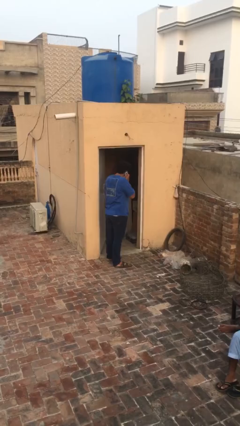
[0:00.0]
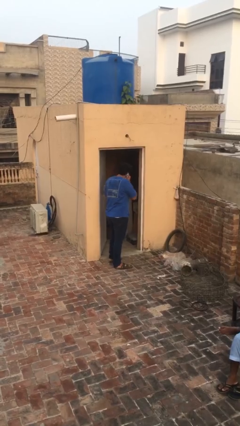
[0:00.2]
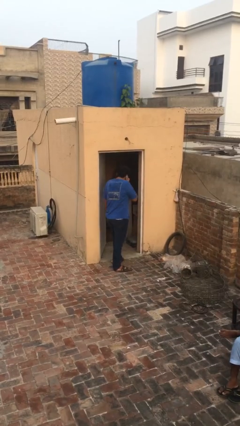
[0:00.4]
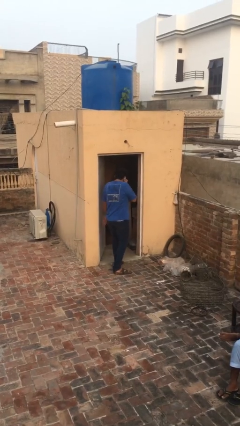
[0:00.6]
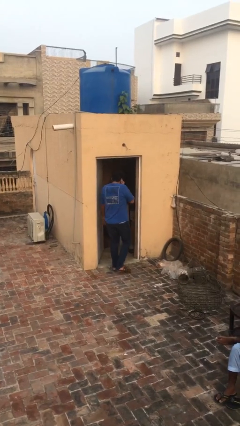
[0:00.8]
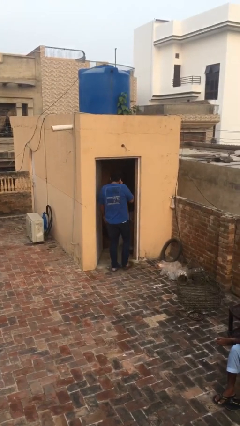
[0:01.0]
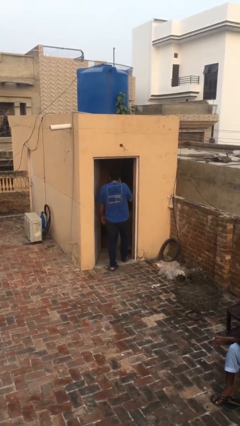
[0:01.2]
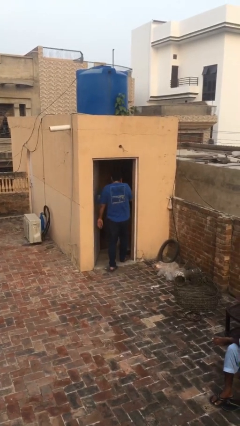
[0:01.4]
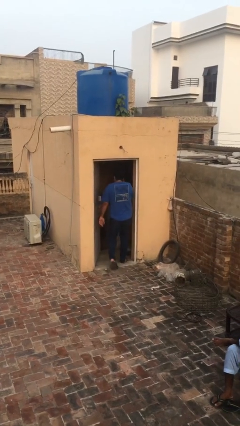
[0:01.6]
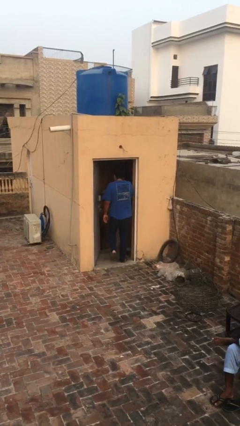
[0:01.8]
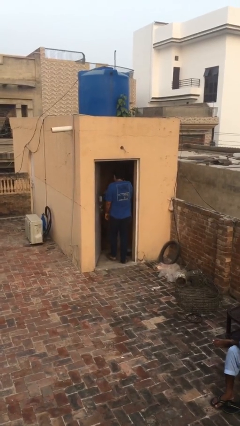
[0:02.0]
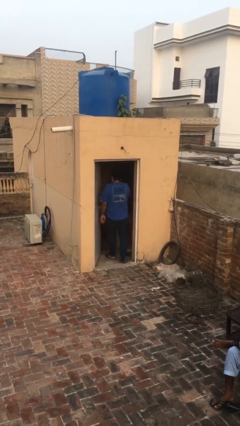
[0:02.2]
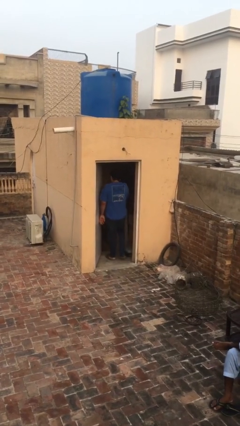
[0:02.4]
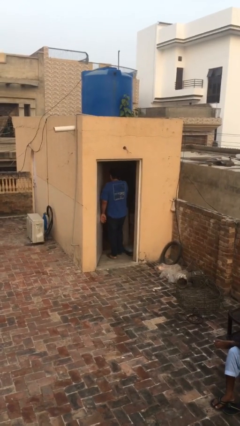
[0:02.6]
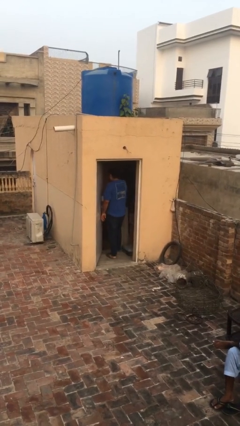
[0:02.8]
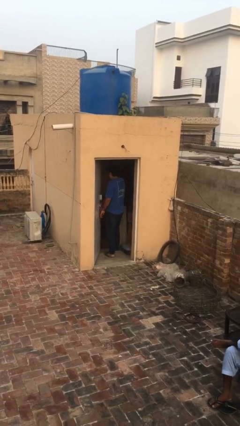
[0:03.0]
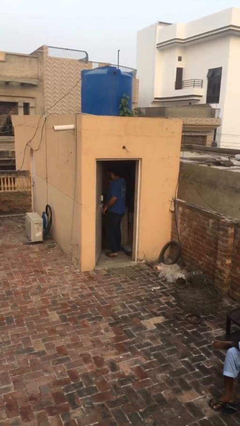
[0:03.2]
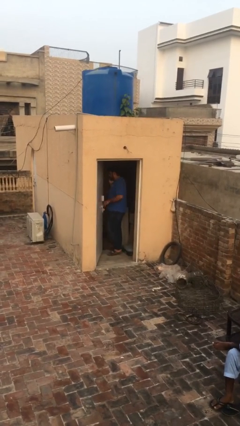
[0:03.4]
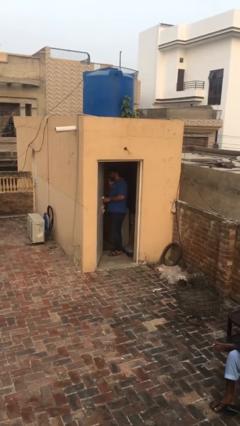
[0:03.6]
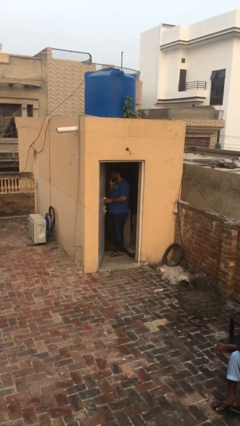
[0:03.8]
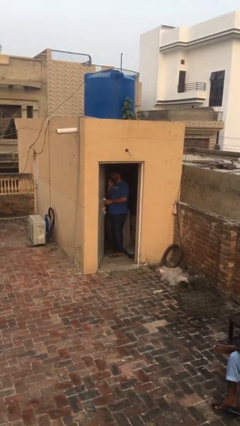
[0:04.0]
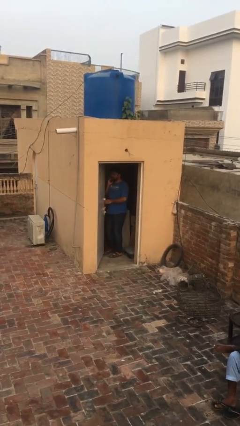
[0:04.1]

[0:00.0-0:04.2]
person exits scene through structure

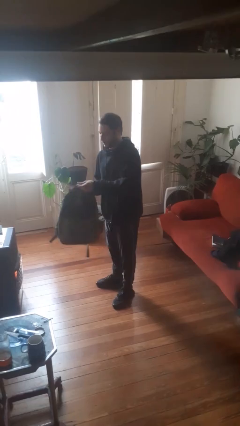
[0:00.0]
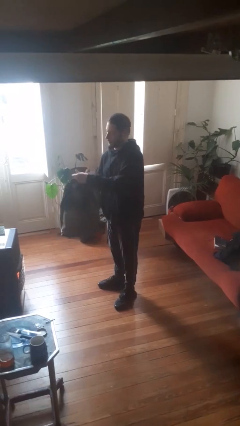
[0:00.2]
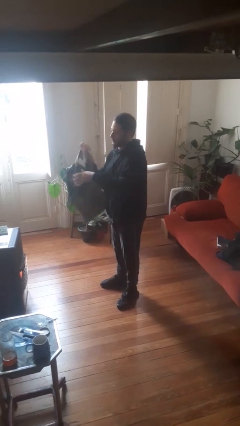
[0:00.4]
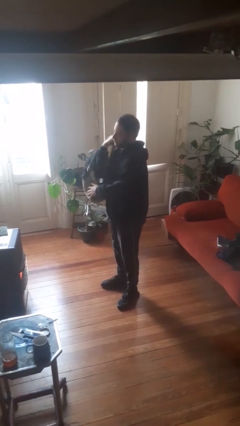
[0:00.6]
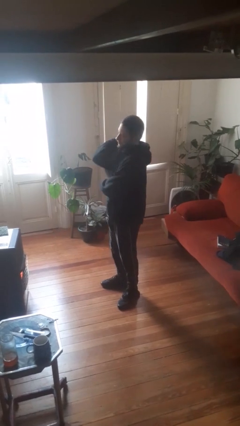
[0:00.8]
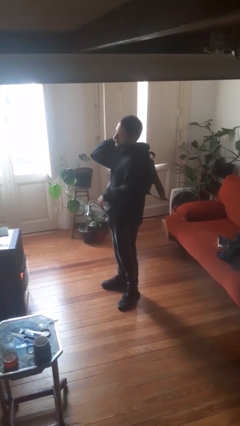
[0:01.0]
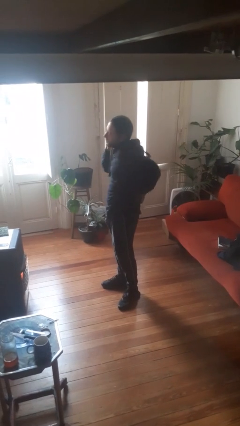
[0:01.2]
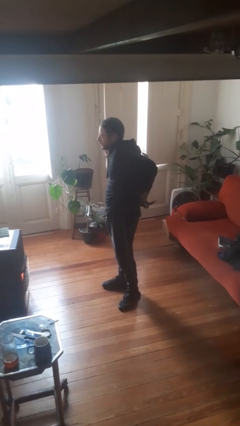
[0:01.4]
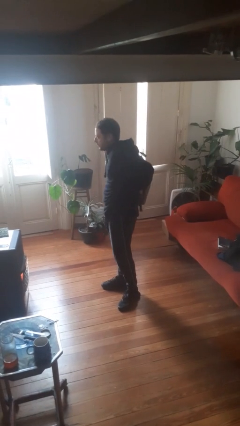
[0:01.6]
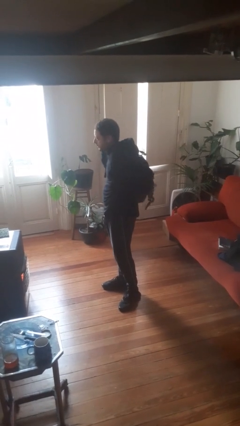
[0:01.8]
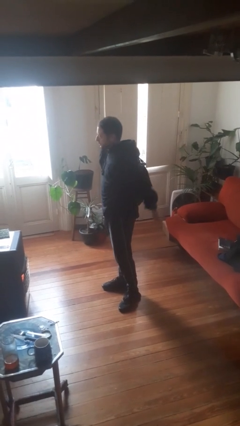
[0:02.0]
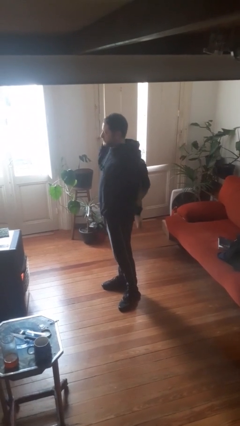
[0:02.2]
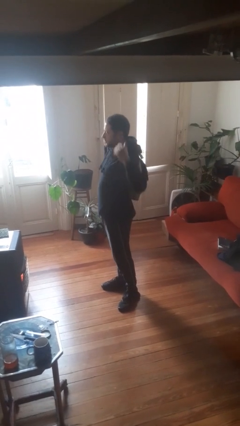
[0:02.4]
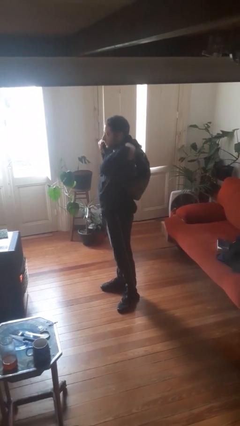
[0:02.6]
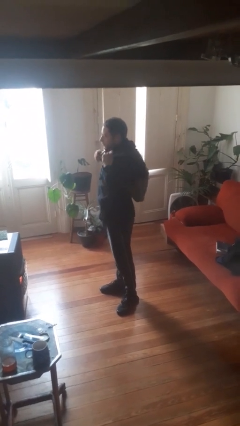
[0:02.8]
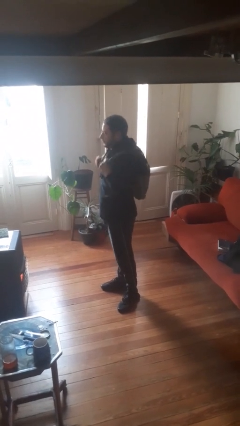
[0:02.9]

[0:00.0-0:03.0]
person puts on backpack

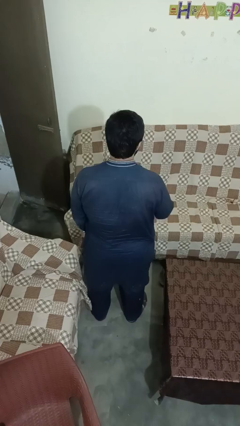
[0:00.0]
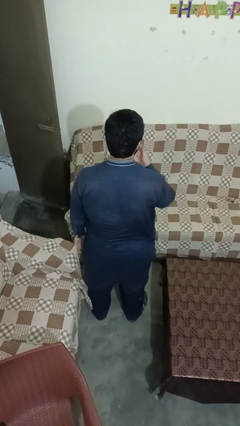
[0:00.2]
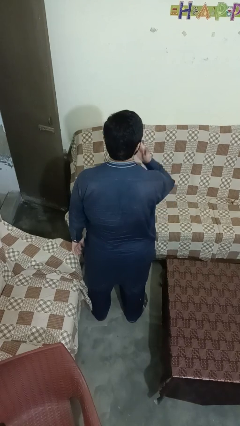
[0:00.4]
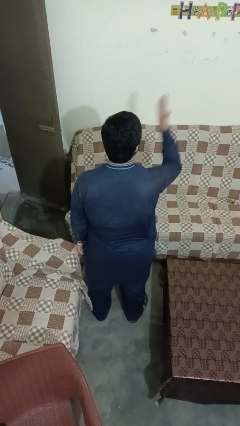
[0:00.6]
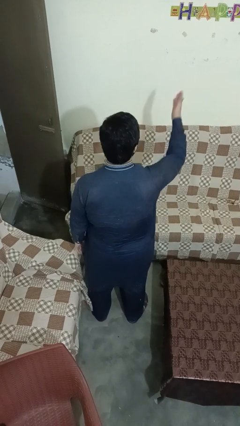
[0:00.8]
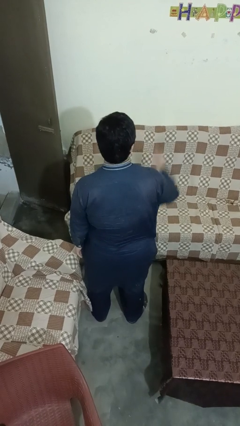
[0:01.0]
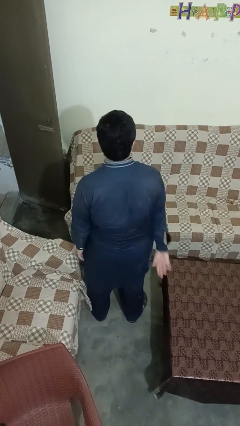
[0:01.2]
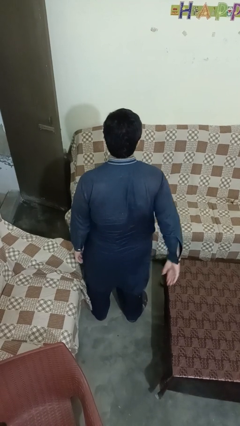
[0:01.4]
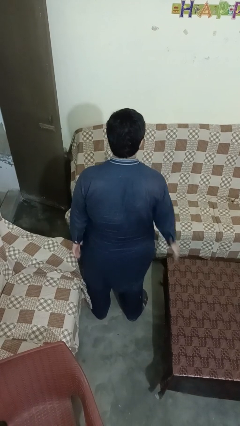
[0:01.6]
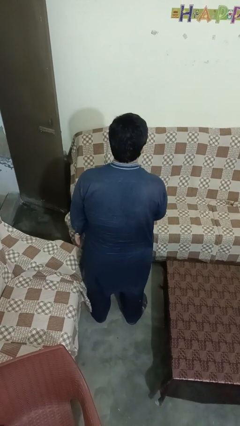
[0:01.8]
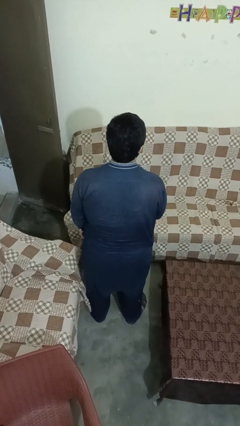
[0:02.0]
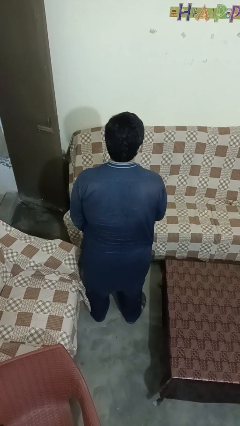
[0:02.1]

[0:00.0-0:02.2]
person gestures blow kiss

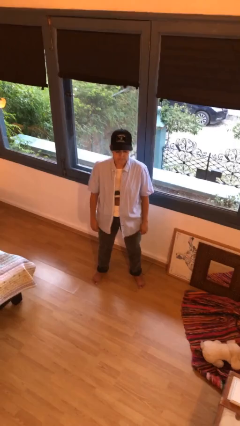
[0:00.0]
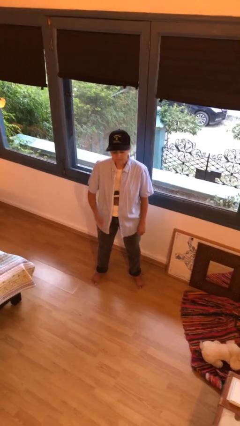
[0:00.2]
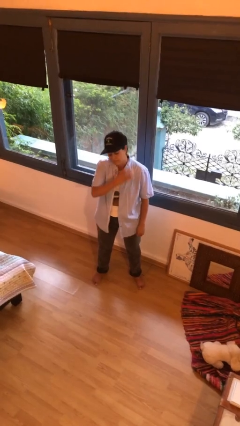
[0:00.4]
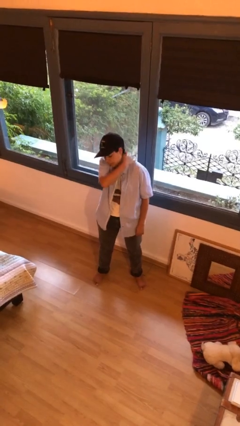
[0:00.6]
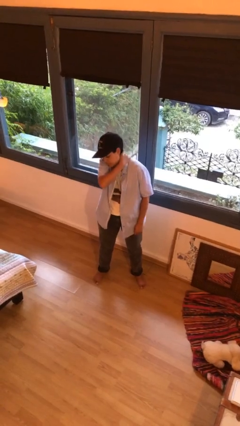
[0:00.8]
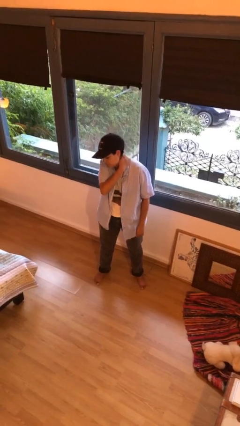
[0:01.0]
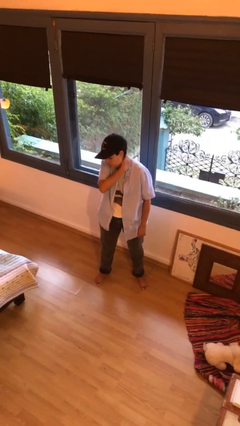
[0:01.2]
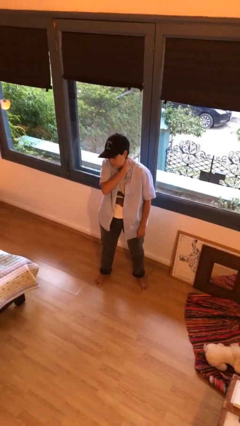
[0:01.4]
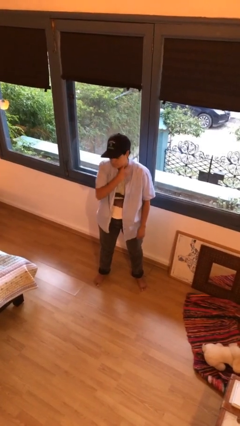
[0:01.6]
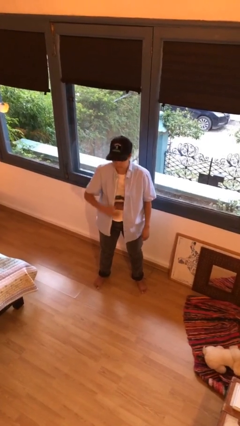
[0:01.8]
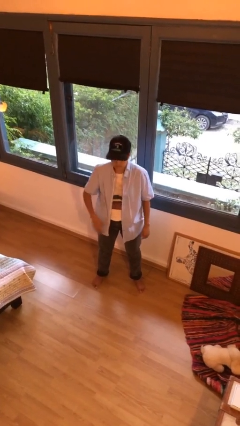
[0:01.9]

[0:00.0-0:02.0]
person rubs neck

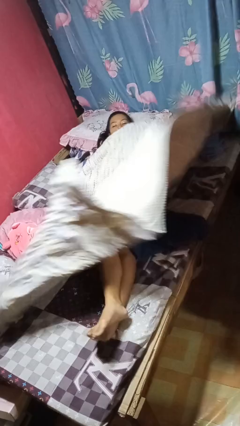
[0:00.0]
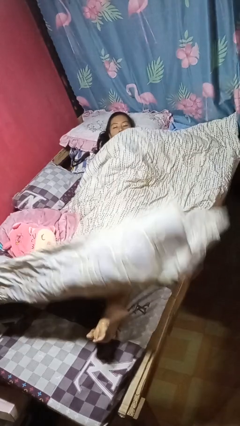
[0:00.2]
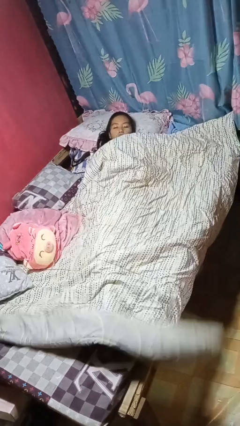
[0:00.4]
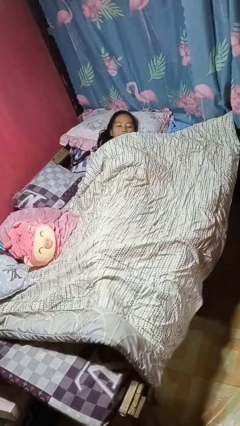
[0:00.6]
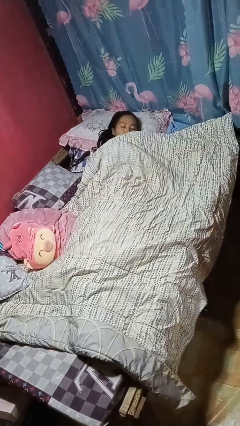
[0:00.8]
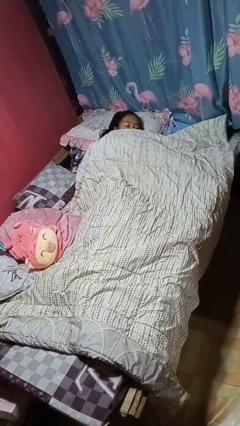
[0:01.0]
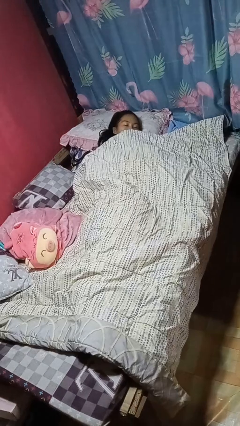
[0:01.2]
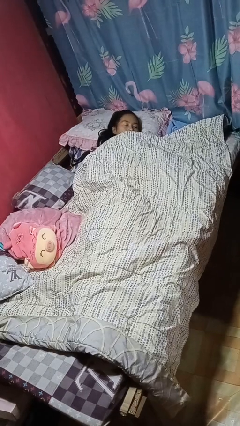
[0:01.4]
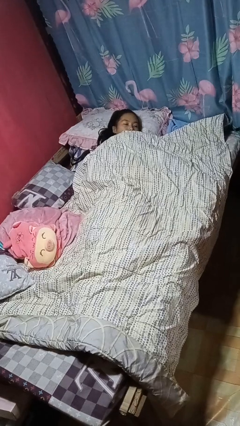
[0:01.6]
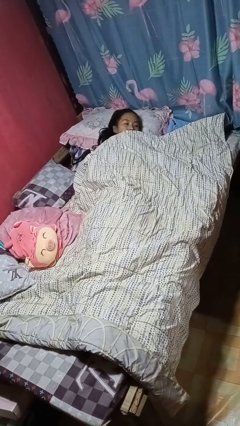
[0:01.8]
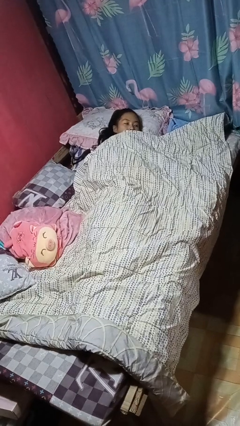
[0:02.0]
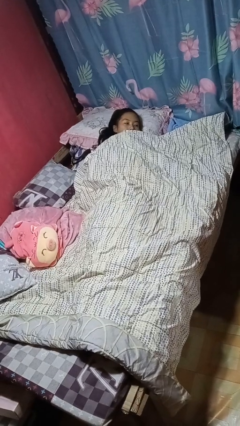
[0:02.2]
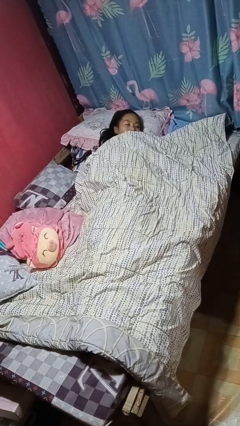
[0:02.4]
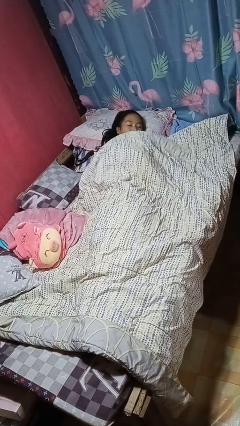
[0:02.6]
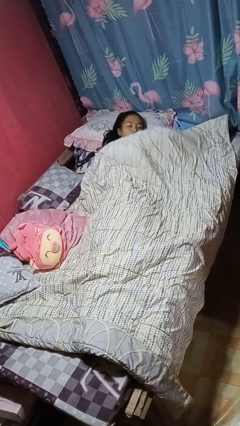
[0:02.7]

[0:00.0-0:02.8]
person covers with bedsheets

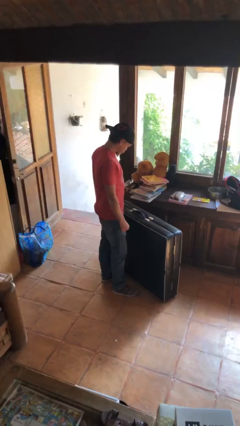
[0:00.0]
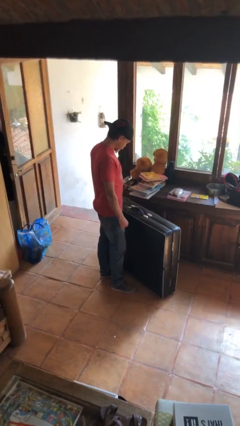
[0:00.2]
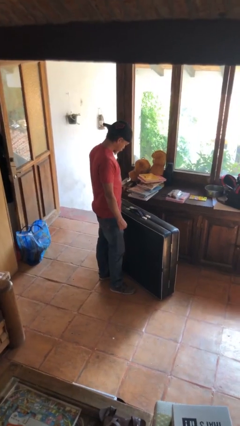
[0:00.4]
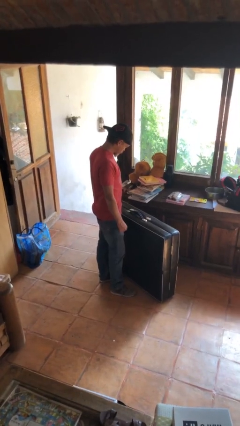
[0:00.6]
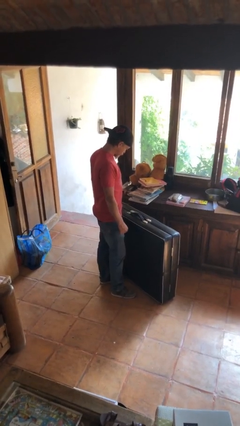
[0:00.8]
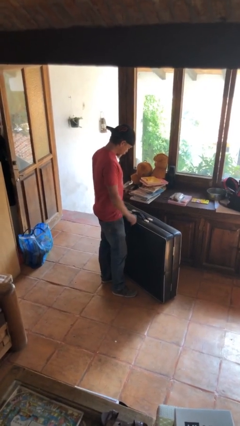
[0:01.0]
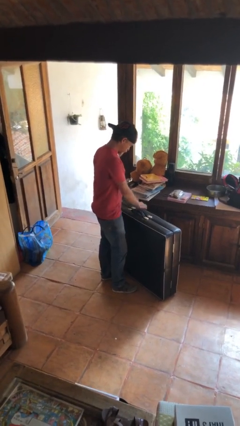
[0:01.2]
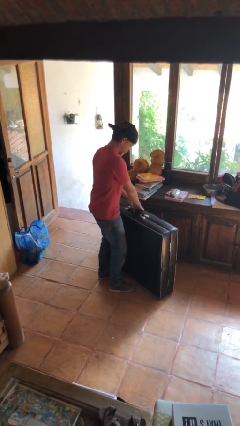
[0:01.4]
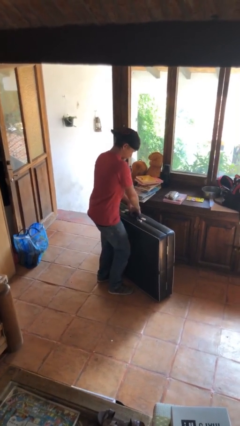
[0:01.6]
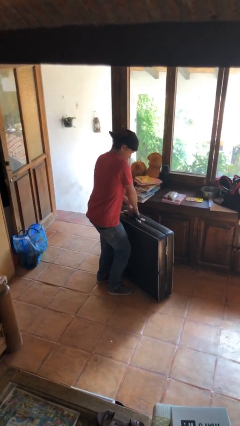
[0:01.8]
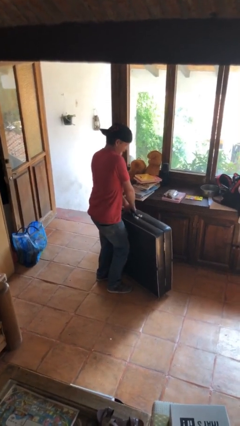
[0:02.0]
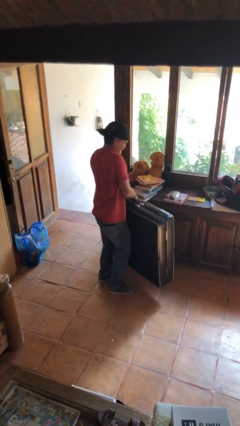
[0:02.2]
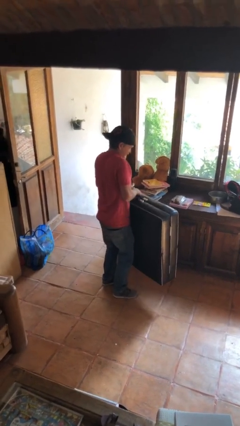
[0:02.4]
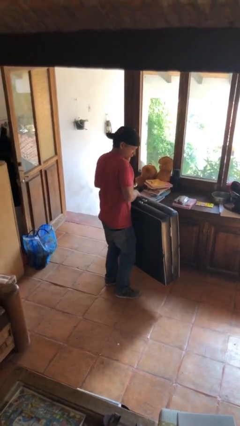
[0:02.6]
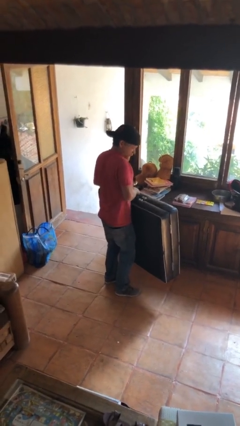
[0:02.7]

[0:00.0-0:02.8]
person picks up object from floor
